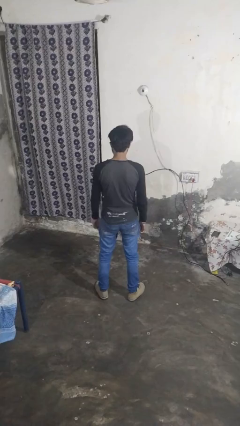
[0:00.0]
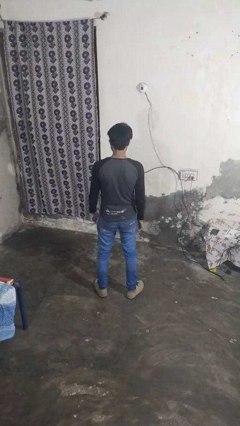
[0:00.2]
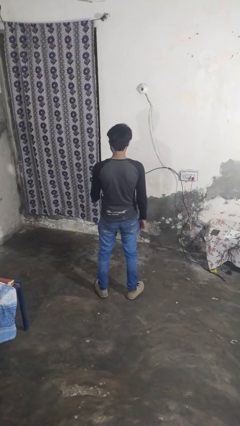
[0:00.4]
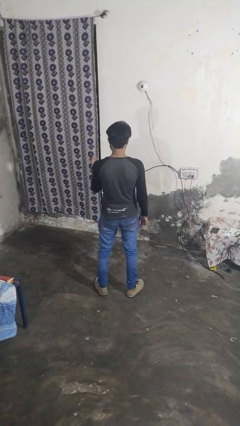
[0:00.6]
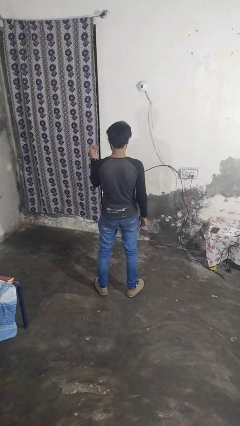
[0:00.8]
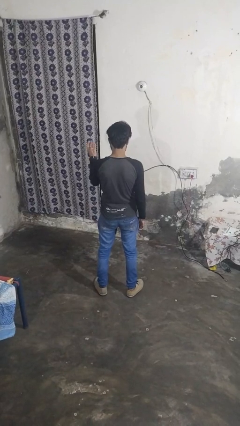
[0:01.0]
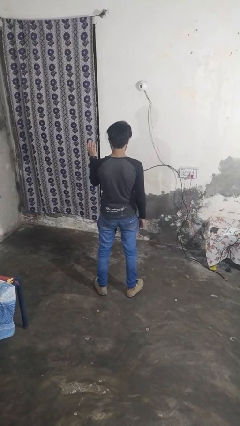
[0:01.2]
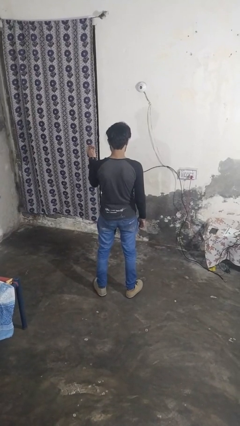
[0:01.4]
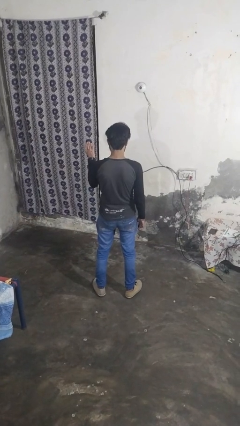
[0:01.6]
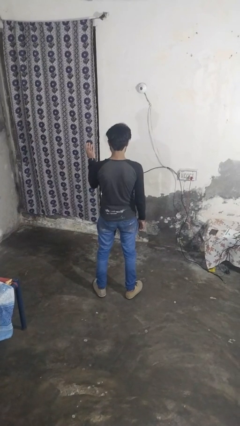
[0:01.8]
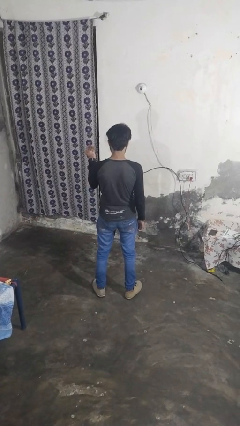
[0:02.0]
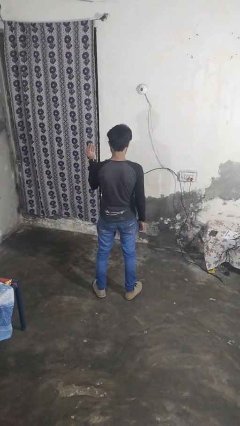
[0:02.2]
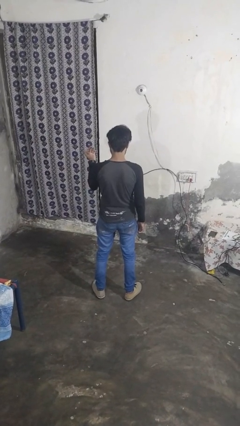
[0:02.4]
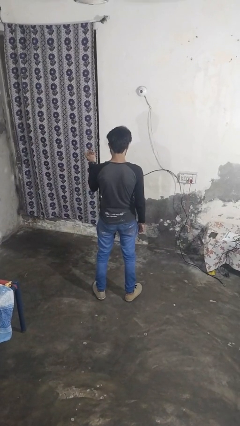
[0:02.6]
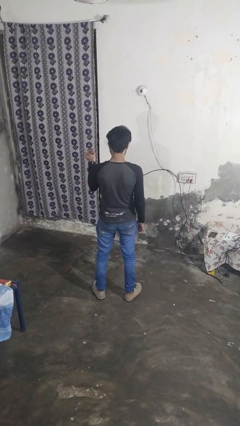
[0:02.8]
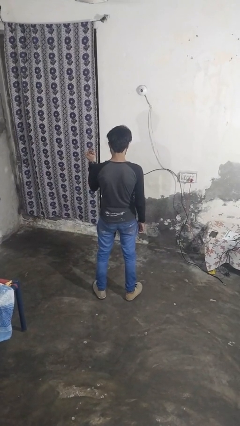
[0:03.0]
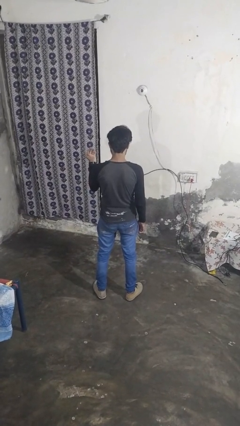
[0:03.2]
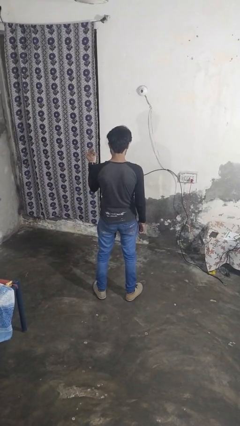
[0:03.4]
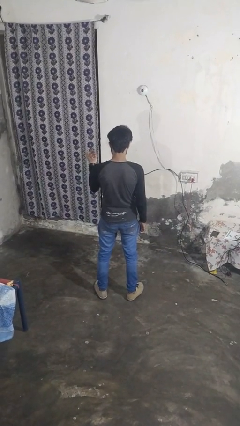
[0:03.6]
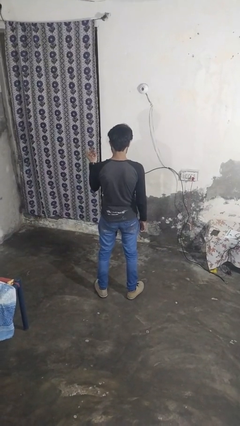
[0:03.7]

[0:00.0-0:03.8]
person gestures come here

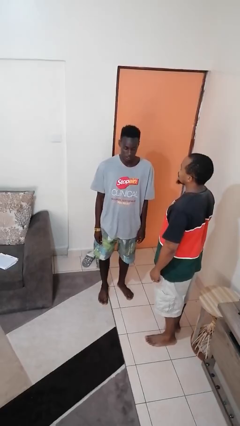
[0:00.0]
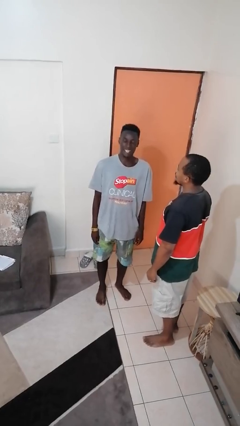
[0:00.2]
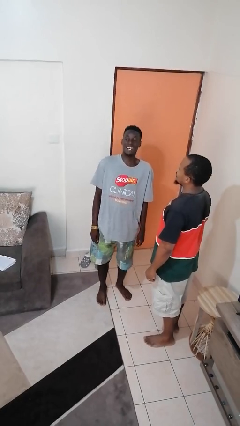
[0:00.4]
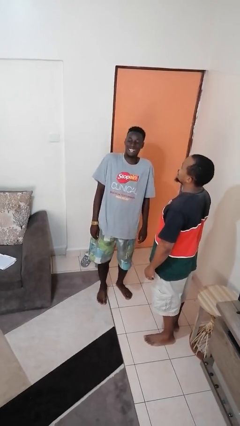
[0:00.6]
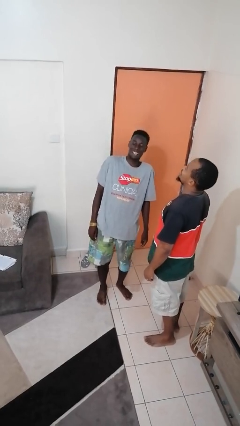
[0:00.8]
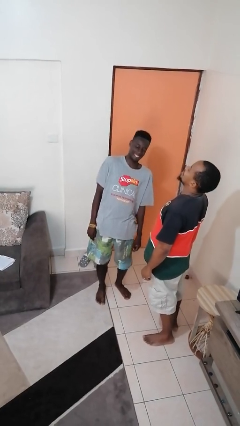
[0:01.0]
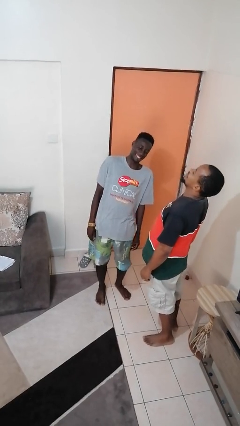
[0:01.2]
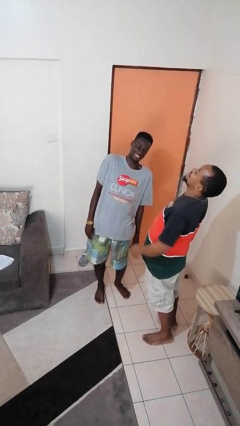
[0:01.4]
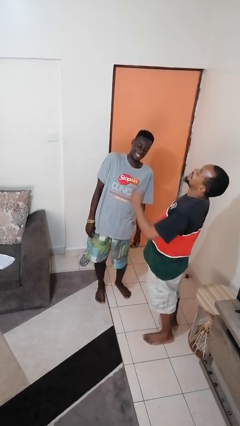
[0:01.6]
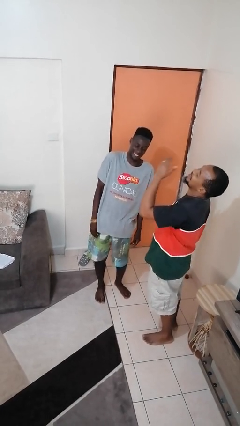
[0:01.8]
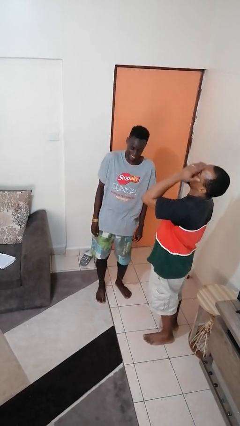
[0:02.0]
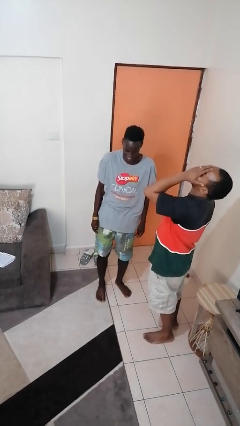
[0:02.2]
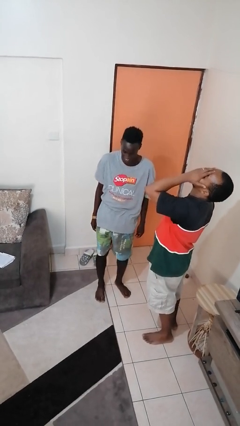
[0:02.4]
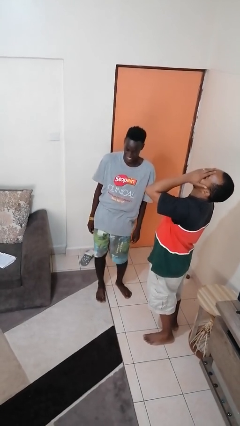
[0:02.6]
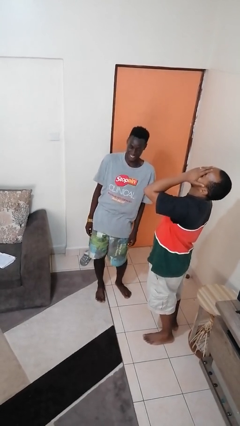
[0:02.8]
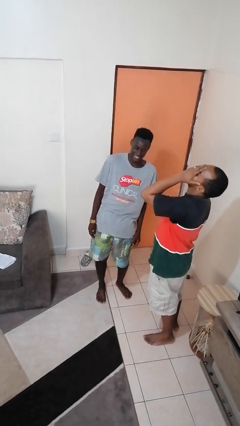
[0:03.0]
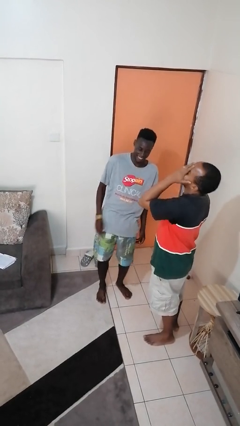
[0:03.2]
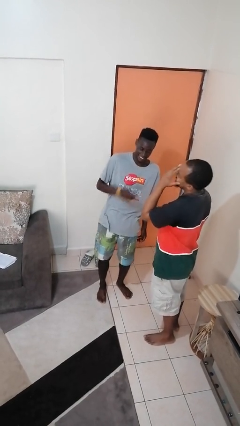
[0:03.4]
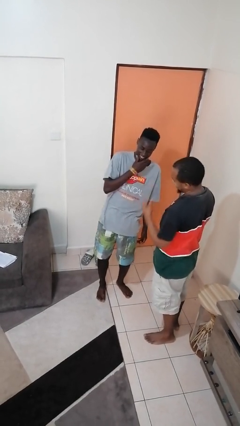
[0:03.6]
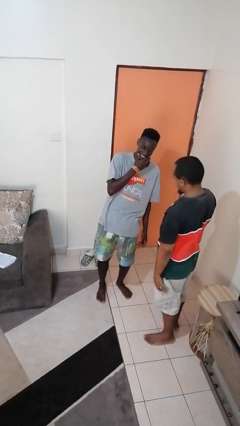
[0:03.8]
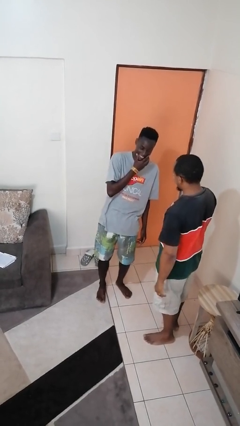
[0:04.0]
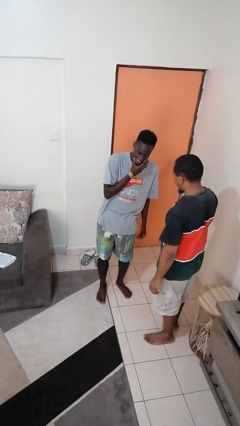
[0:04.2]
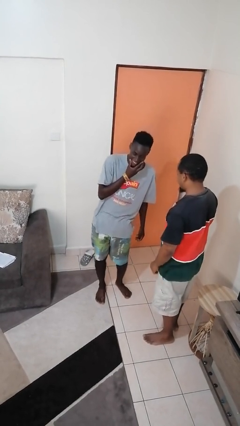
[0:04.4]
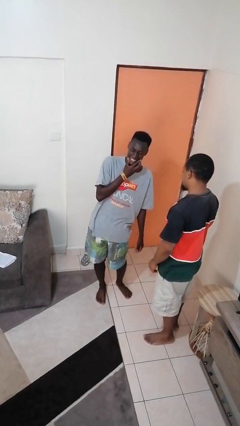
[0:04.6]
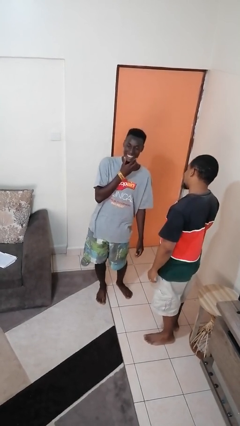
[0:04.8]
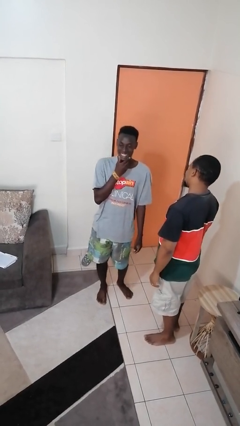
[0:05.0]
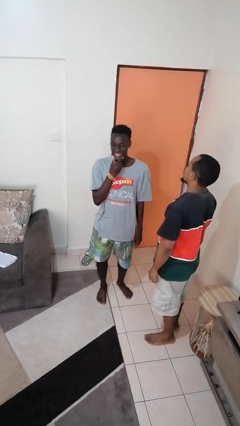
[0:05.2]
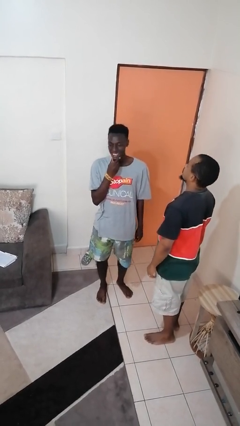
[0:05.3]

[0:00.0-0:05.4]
person laughs with person

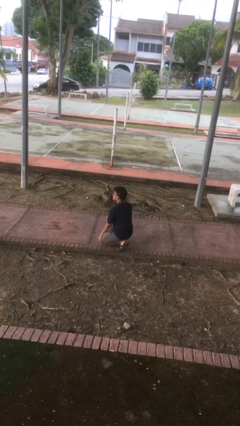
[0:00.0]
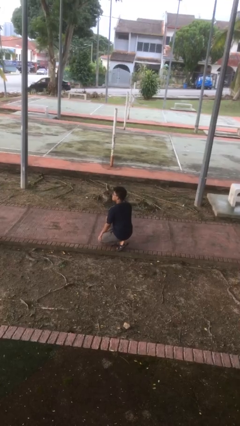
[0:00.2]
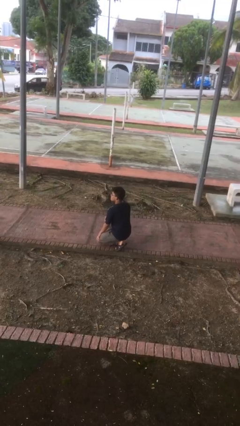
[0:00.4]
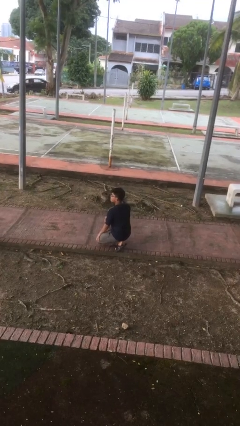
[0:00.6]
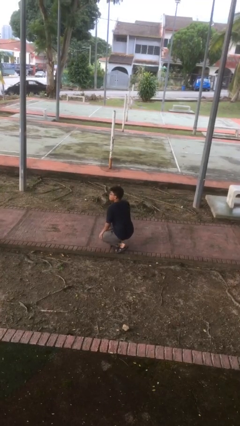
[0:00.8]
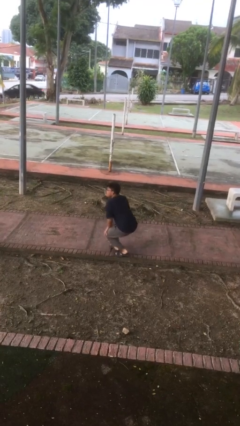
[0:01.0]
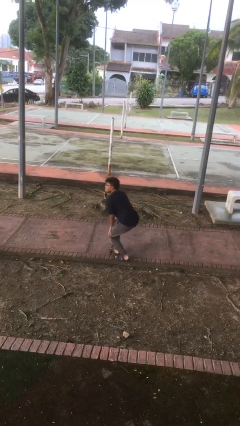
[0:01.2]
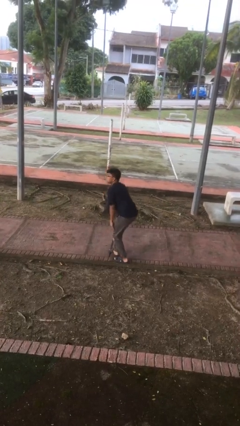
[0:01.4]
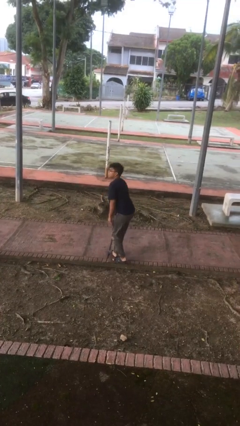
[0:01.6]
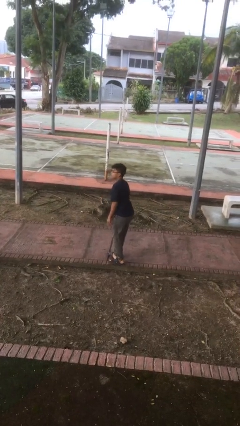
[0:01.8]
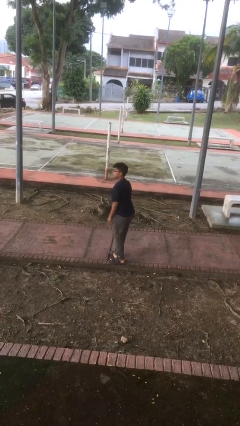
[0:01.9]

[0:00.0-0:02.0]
person stands up from floor

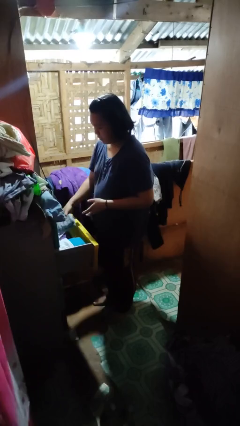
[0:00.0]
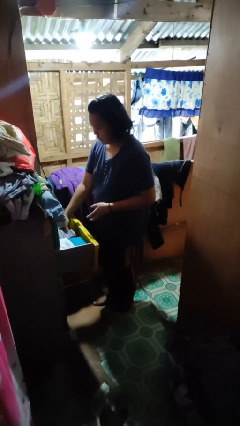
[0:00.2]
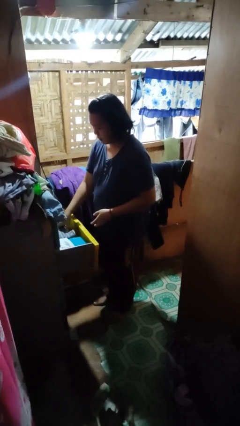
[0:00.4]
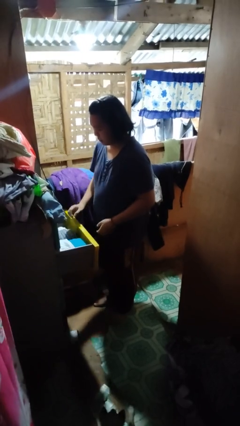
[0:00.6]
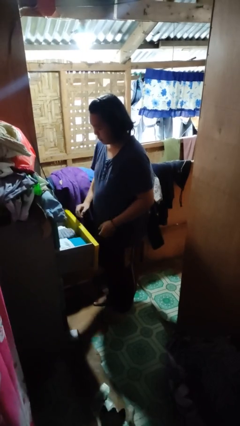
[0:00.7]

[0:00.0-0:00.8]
person puts clothes into dresser

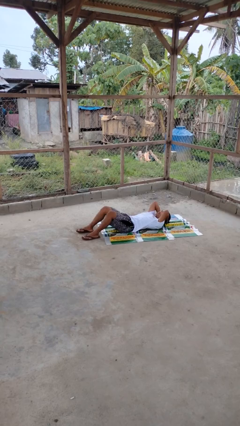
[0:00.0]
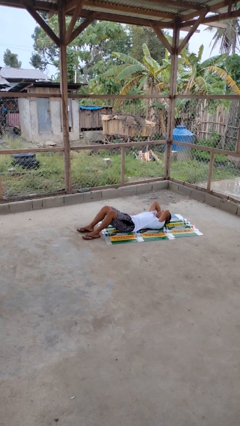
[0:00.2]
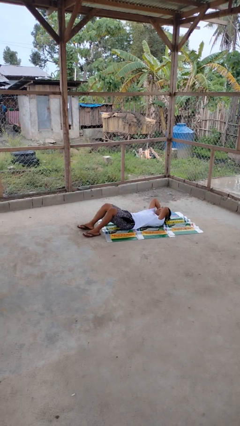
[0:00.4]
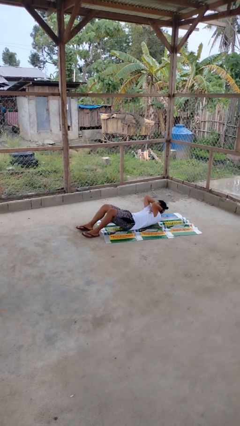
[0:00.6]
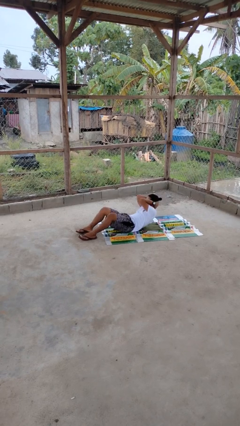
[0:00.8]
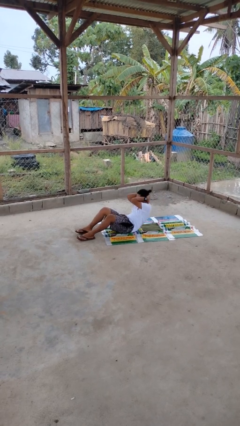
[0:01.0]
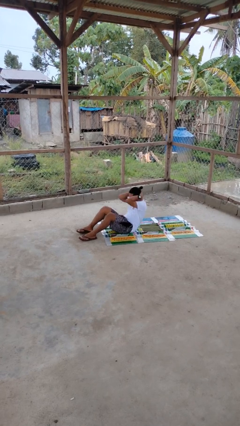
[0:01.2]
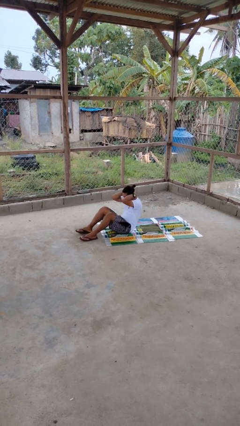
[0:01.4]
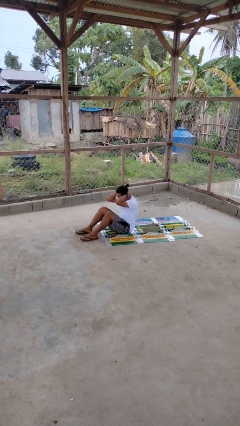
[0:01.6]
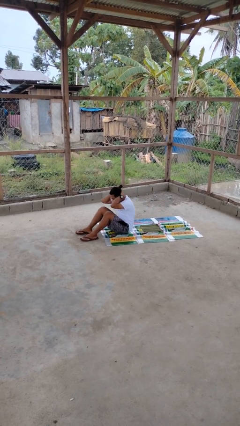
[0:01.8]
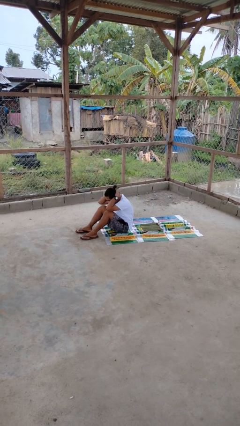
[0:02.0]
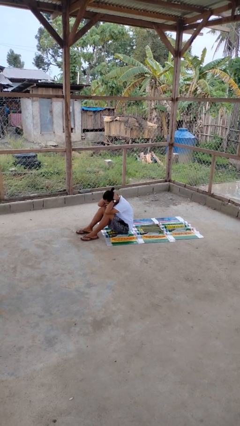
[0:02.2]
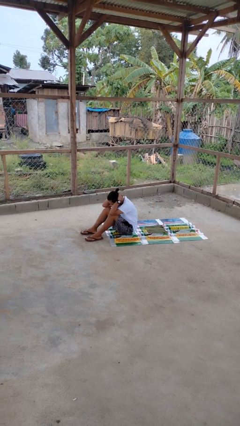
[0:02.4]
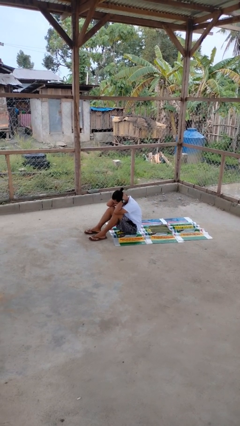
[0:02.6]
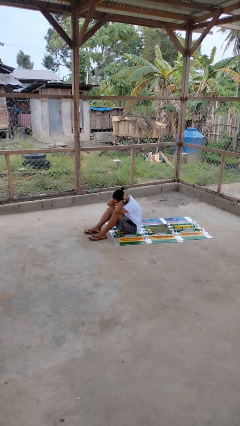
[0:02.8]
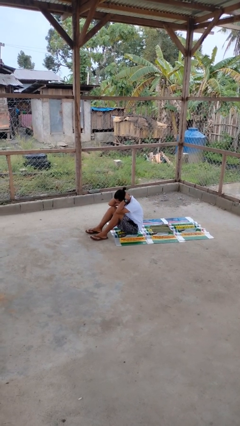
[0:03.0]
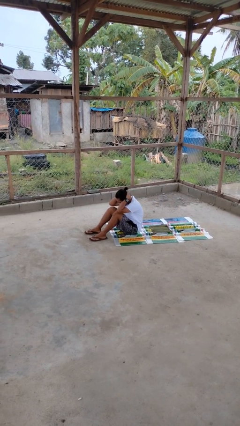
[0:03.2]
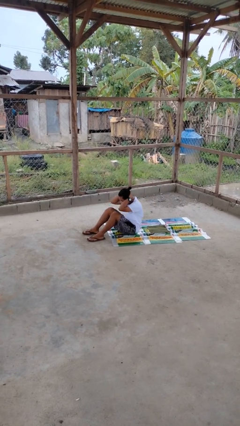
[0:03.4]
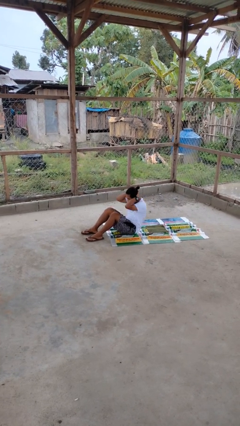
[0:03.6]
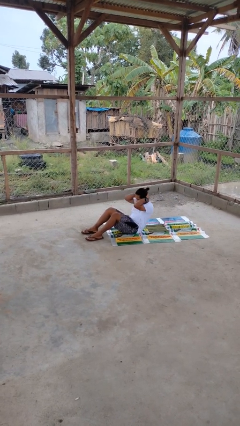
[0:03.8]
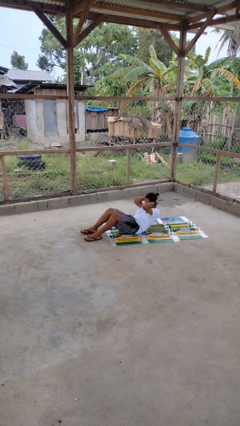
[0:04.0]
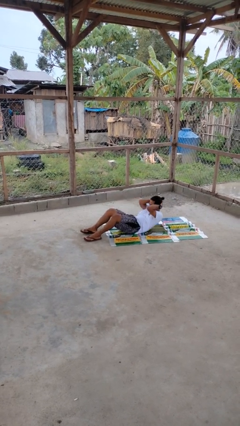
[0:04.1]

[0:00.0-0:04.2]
person exercises with situp

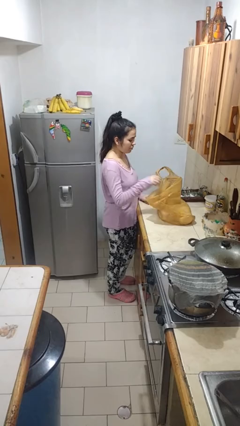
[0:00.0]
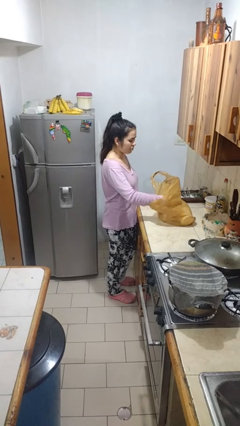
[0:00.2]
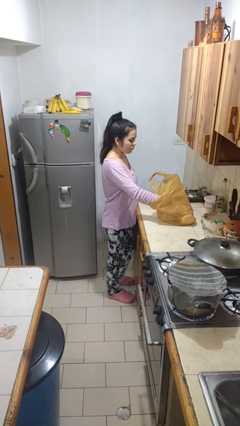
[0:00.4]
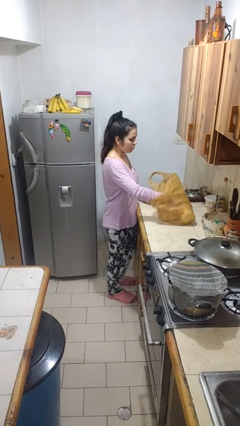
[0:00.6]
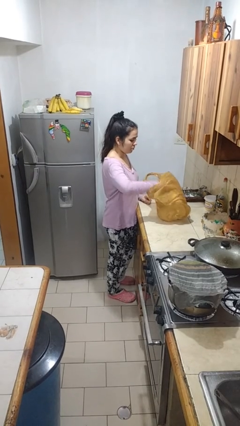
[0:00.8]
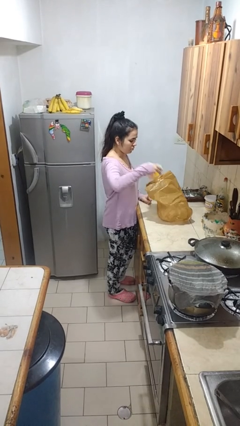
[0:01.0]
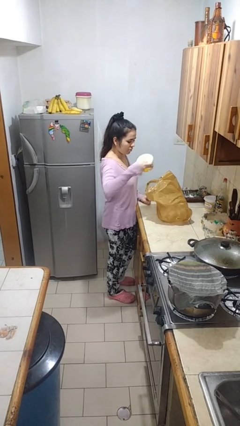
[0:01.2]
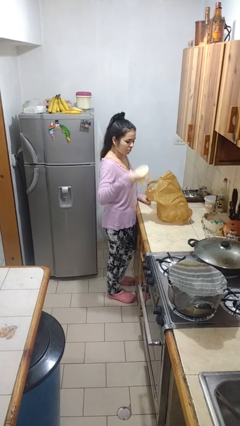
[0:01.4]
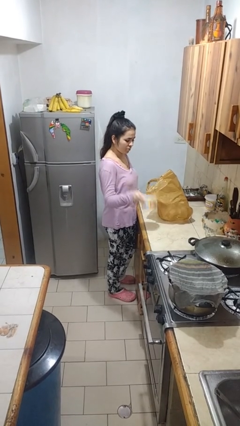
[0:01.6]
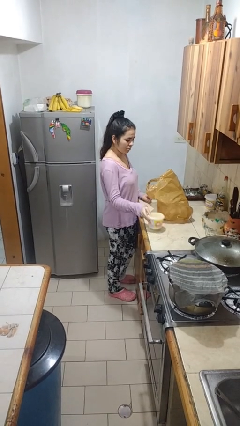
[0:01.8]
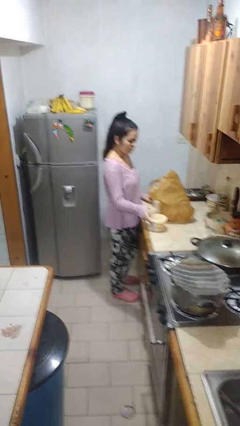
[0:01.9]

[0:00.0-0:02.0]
person takes object from bag
